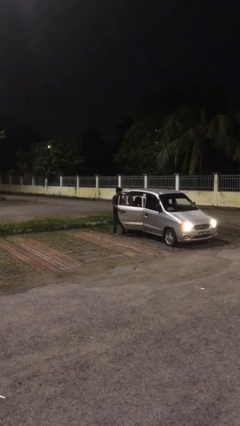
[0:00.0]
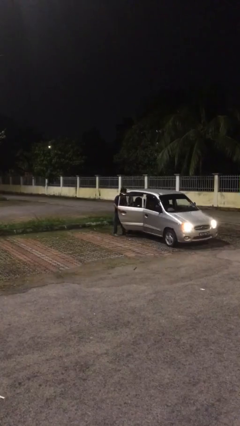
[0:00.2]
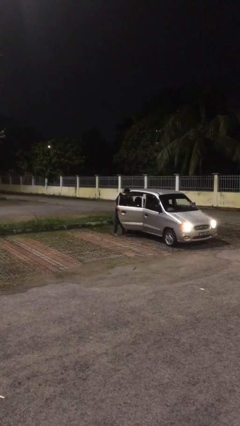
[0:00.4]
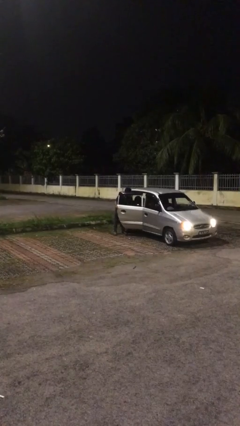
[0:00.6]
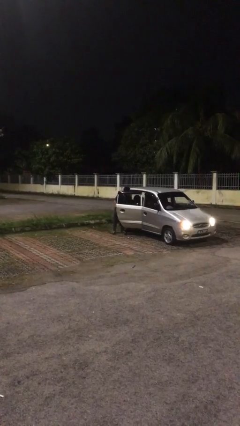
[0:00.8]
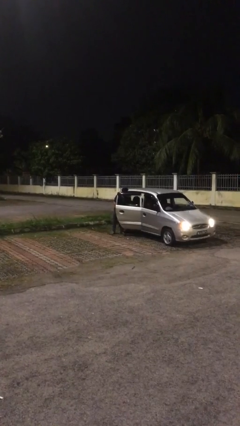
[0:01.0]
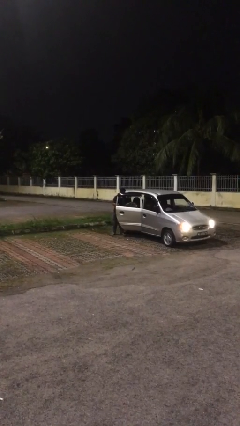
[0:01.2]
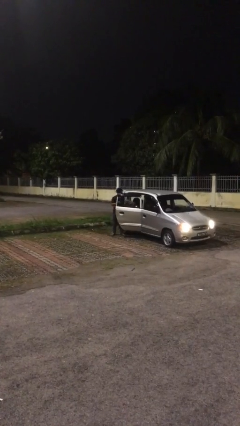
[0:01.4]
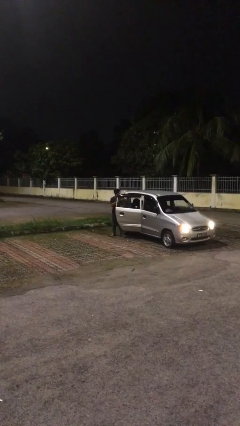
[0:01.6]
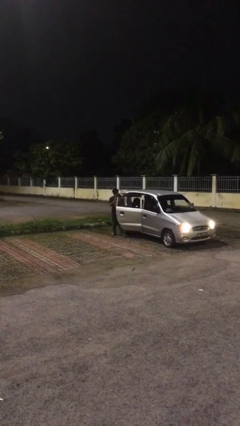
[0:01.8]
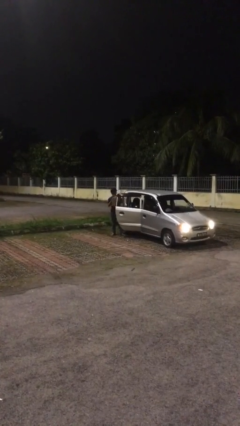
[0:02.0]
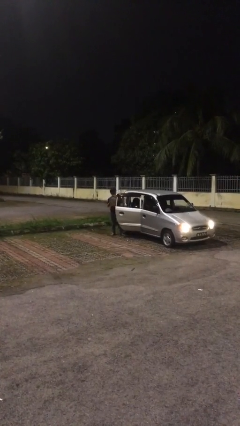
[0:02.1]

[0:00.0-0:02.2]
person unloads car

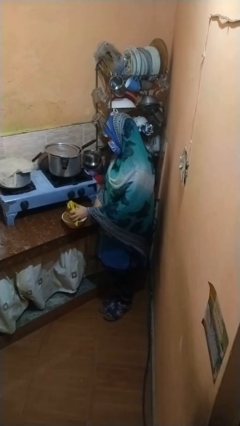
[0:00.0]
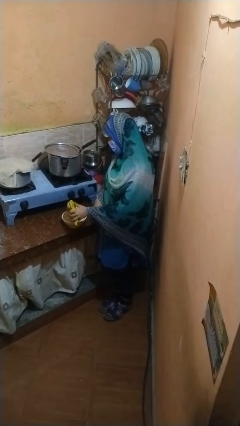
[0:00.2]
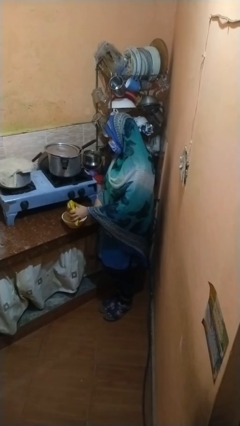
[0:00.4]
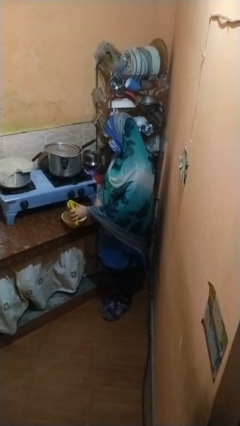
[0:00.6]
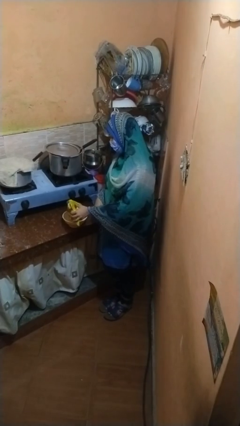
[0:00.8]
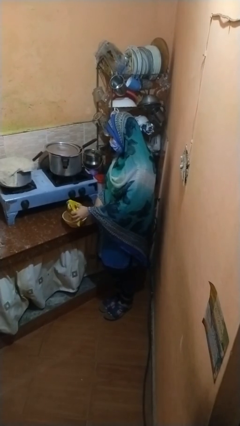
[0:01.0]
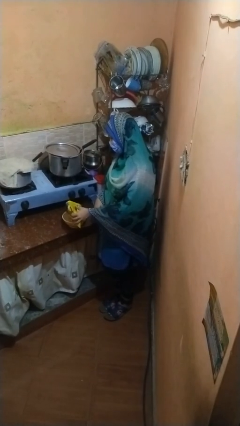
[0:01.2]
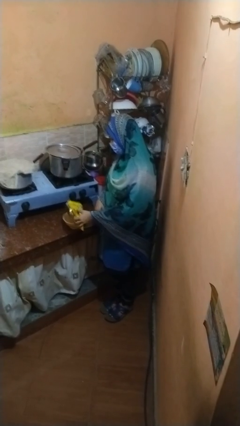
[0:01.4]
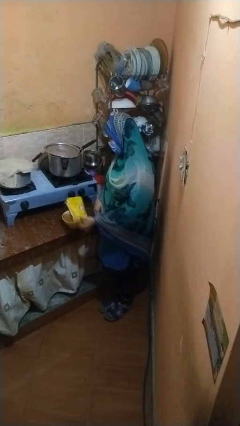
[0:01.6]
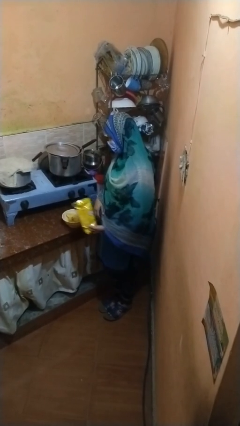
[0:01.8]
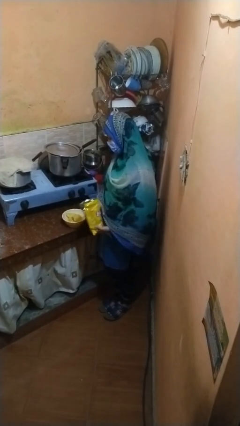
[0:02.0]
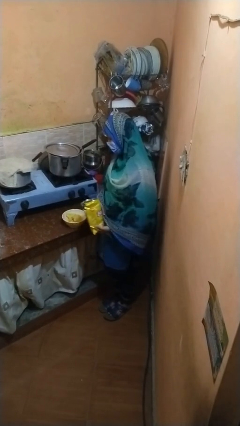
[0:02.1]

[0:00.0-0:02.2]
person pours into bowl

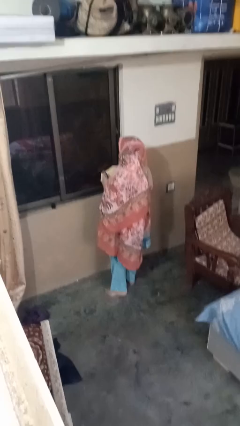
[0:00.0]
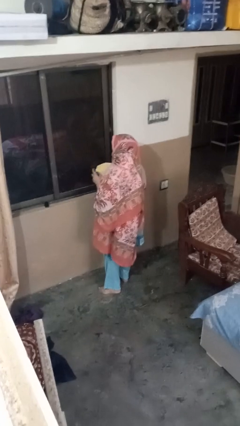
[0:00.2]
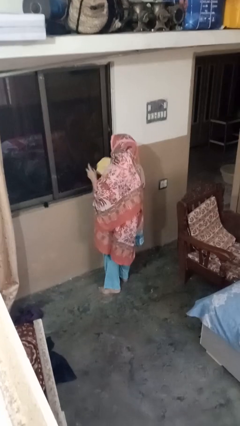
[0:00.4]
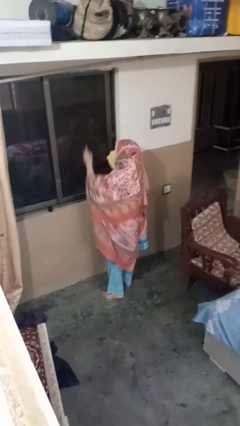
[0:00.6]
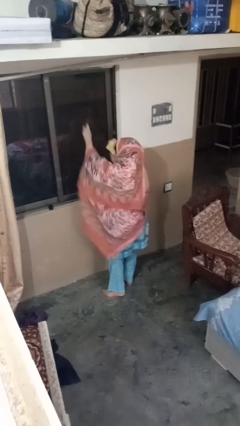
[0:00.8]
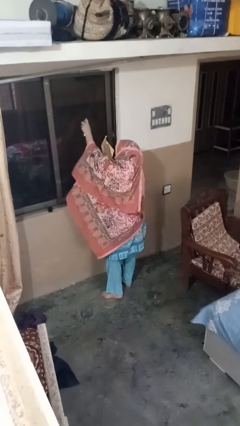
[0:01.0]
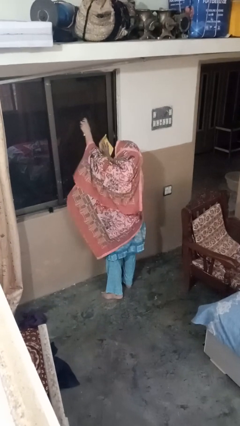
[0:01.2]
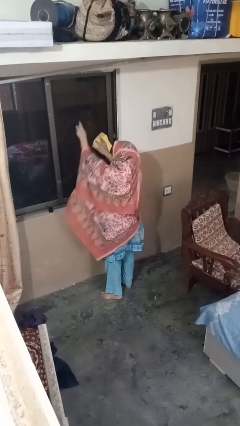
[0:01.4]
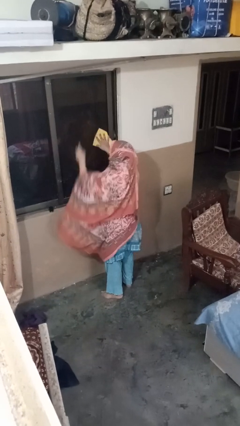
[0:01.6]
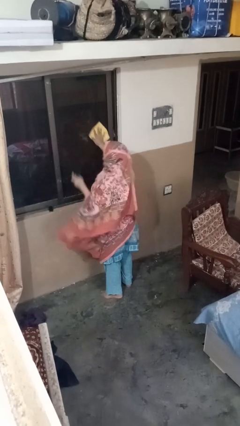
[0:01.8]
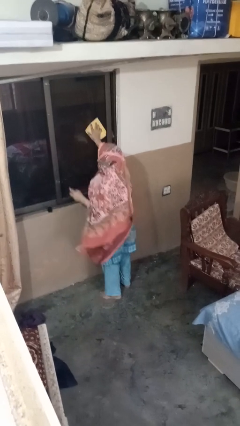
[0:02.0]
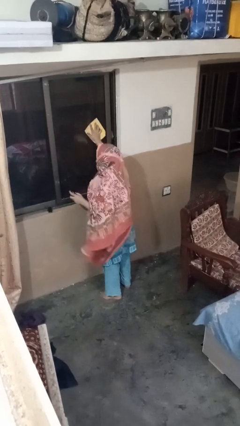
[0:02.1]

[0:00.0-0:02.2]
person sprays from bottle

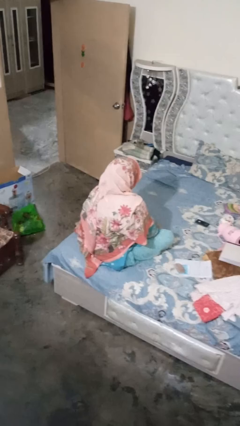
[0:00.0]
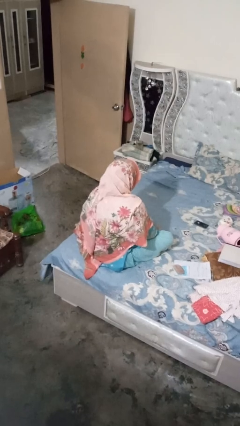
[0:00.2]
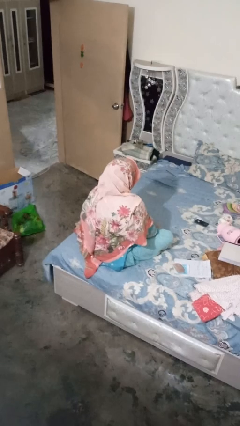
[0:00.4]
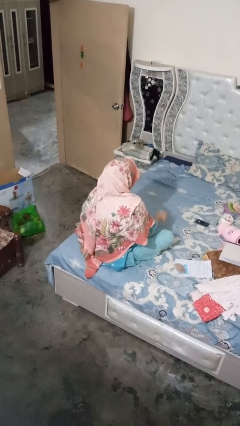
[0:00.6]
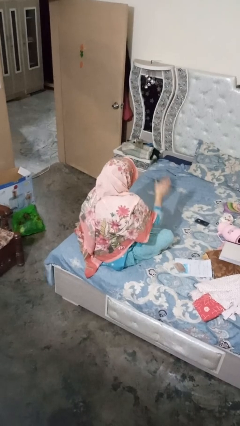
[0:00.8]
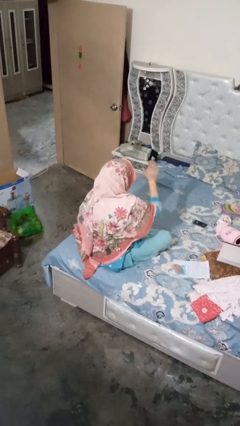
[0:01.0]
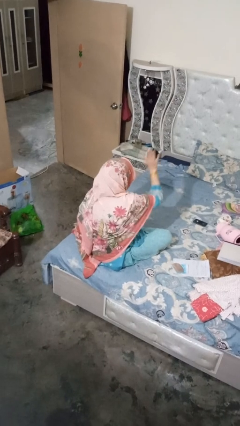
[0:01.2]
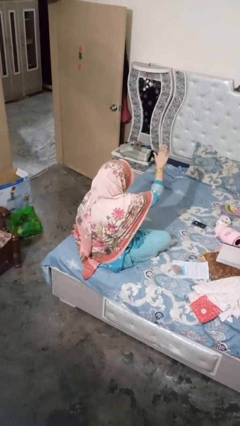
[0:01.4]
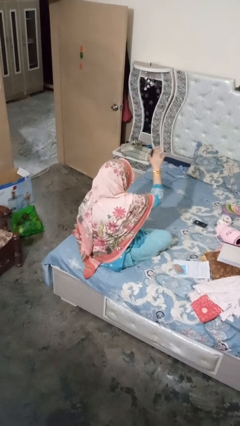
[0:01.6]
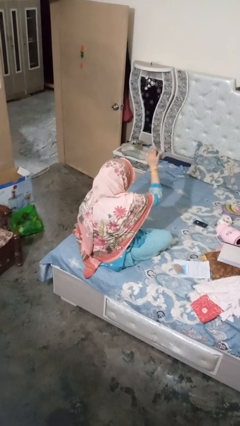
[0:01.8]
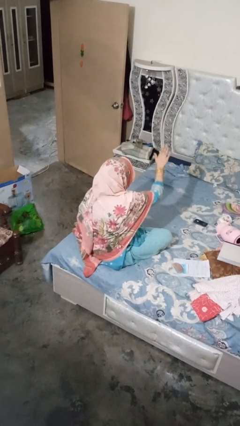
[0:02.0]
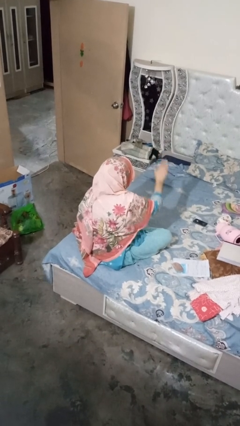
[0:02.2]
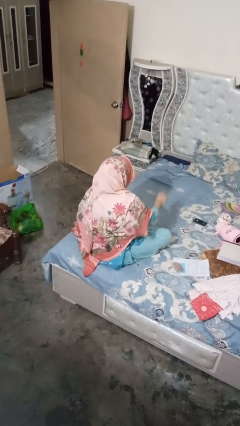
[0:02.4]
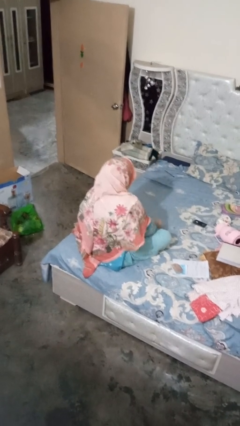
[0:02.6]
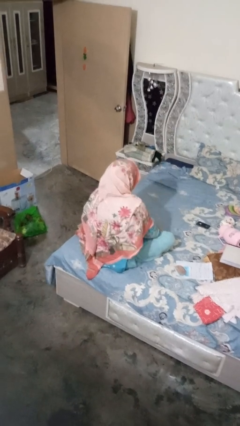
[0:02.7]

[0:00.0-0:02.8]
person gestures stop

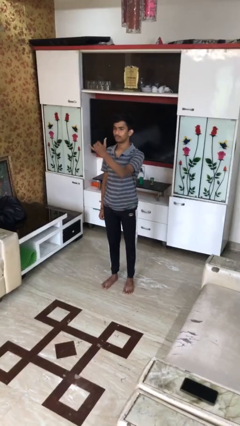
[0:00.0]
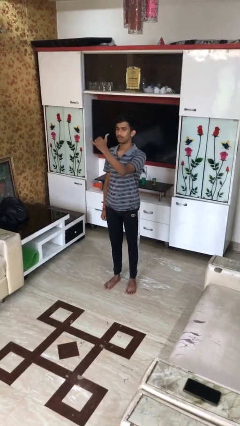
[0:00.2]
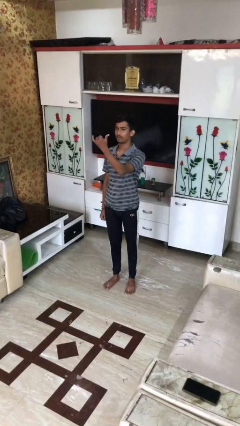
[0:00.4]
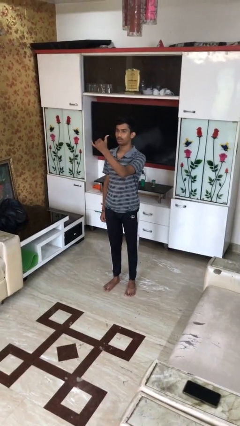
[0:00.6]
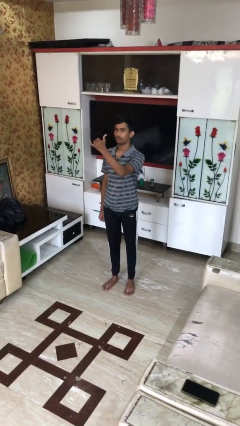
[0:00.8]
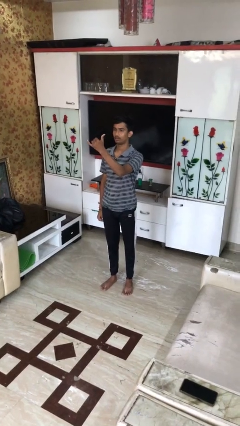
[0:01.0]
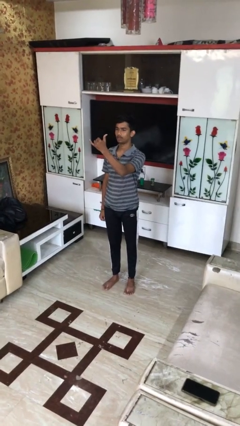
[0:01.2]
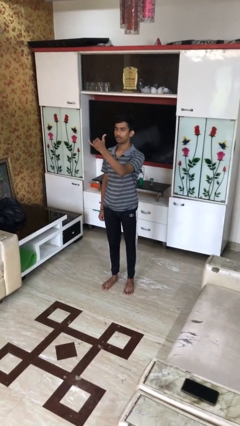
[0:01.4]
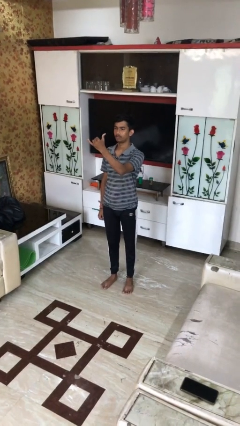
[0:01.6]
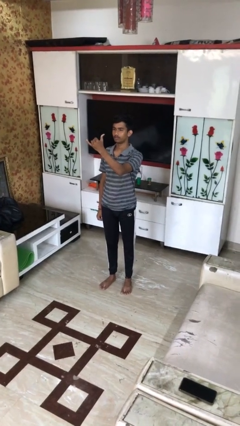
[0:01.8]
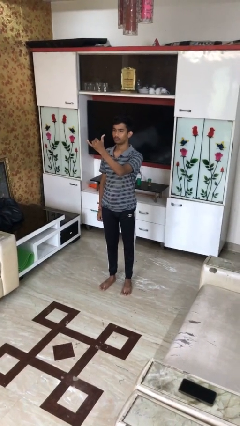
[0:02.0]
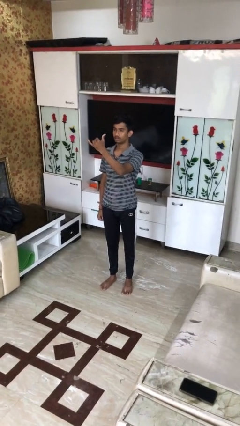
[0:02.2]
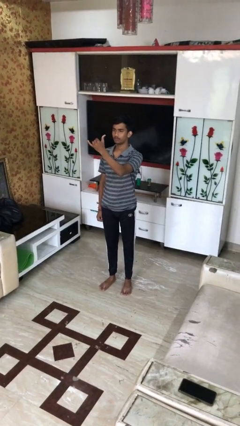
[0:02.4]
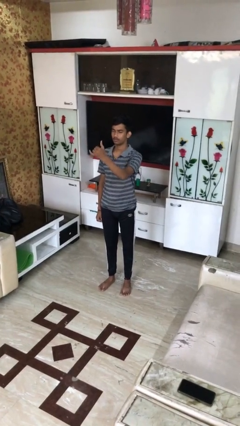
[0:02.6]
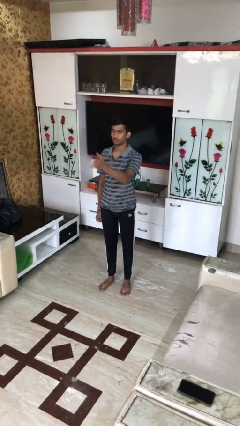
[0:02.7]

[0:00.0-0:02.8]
person gestures hang loose

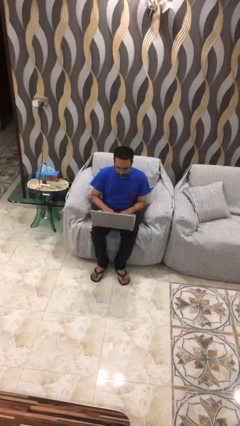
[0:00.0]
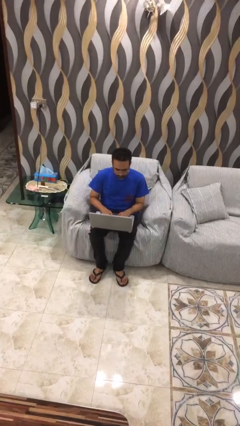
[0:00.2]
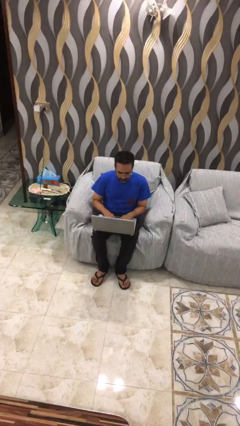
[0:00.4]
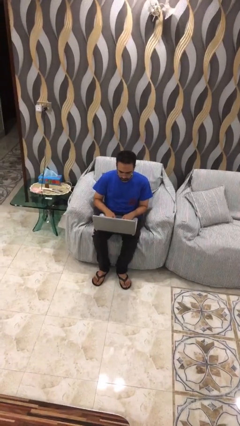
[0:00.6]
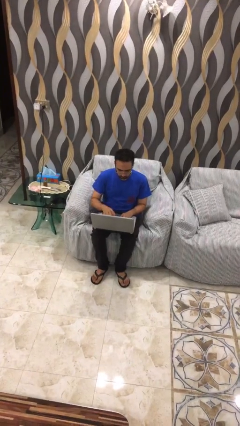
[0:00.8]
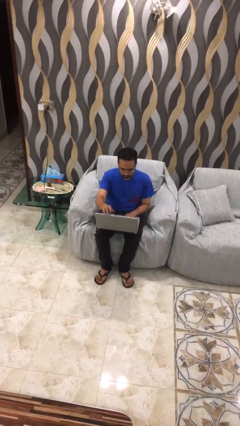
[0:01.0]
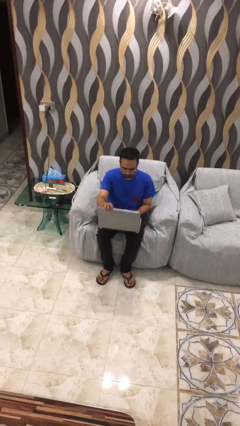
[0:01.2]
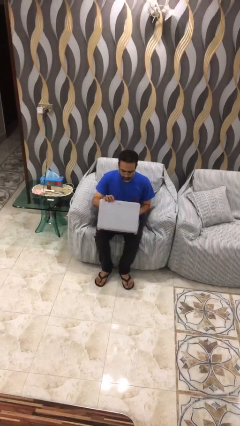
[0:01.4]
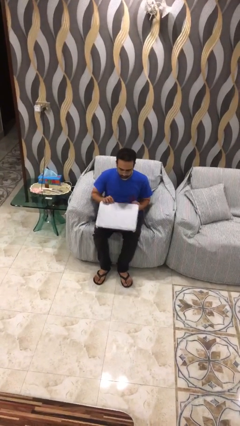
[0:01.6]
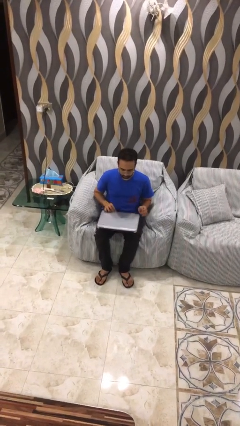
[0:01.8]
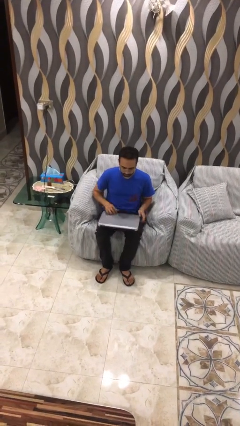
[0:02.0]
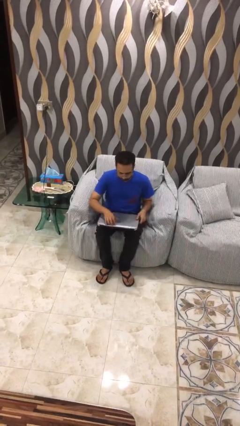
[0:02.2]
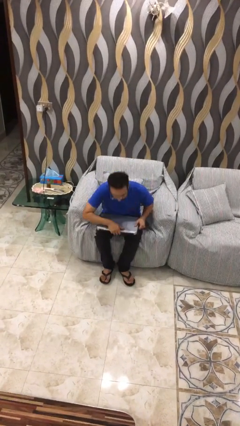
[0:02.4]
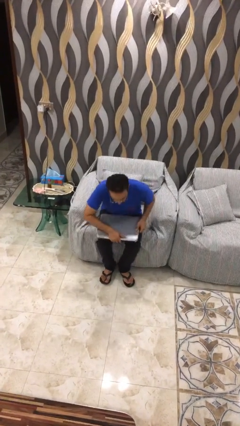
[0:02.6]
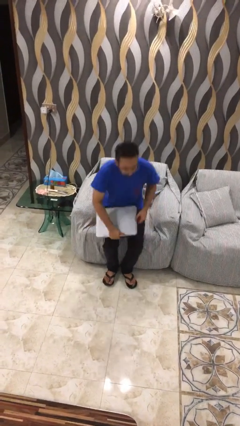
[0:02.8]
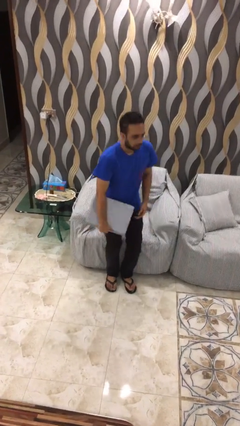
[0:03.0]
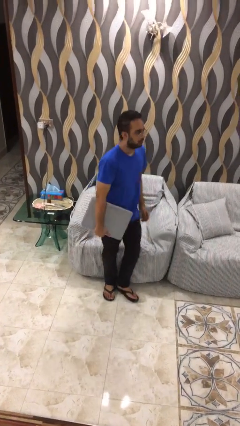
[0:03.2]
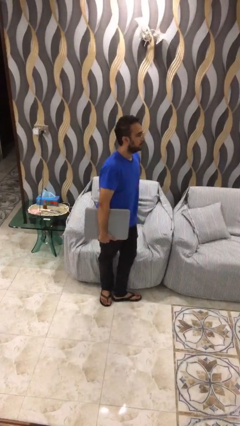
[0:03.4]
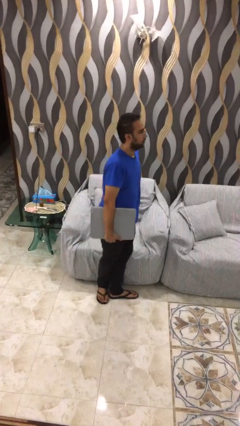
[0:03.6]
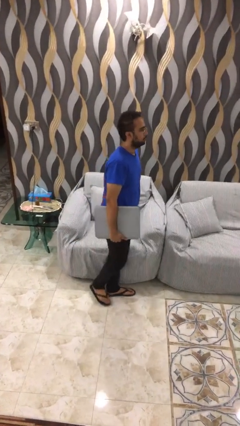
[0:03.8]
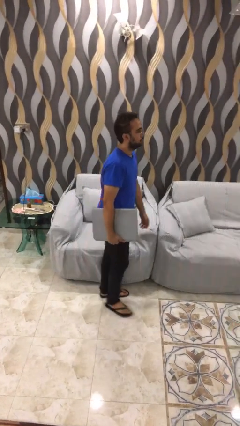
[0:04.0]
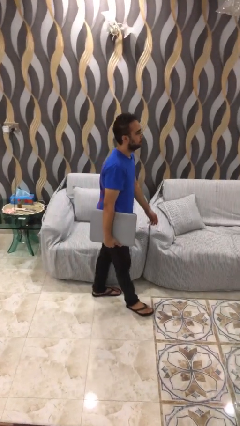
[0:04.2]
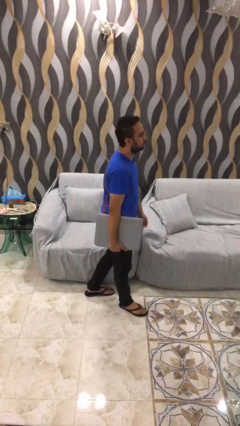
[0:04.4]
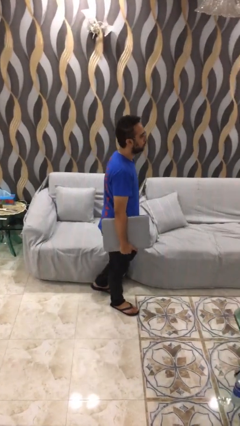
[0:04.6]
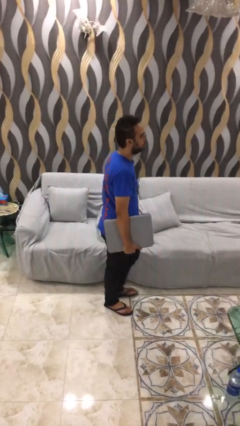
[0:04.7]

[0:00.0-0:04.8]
person stands up

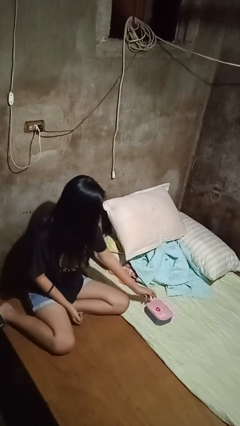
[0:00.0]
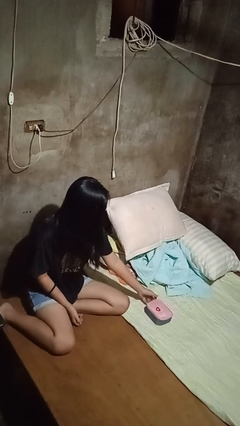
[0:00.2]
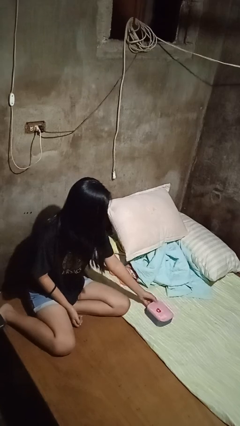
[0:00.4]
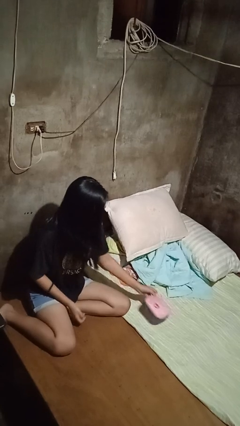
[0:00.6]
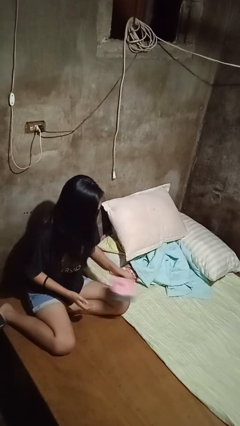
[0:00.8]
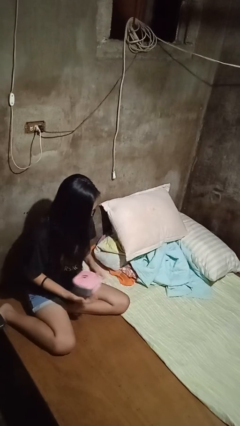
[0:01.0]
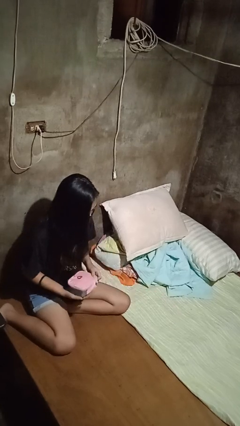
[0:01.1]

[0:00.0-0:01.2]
person picks up object from bed
